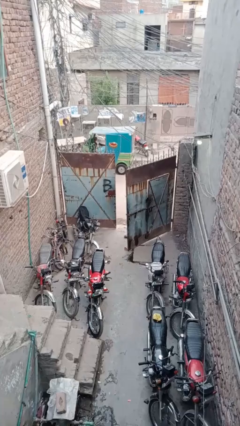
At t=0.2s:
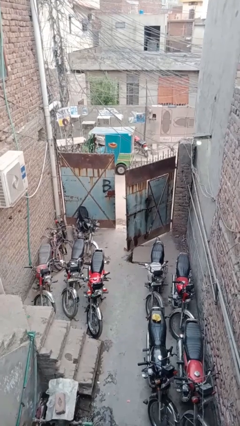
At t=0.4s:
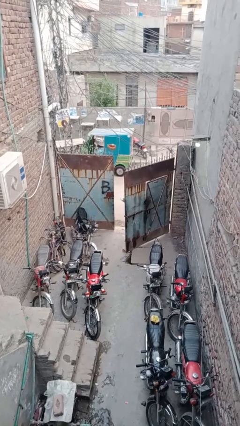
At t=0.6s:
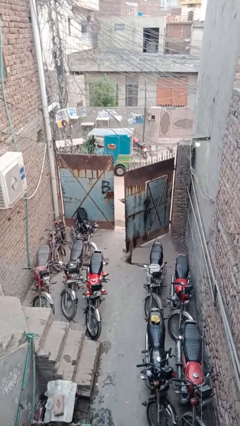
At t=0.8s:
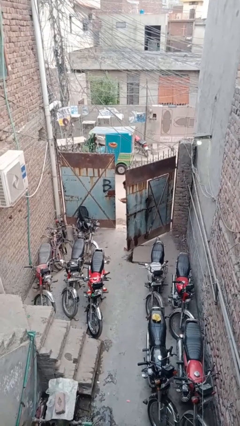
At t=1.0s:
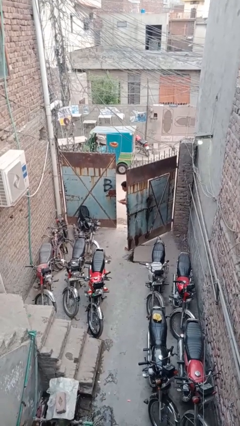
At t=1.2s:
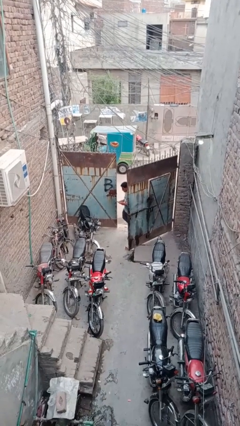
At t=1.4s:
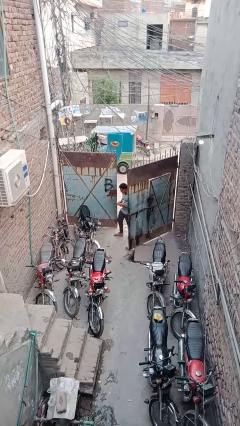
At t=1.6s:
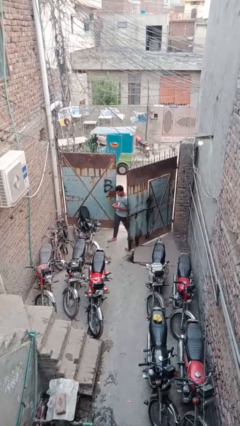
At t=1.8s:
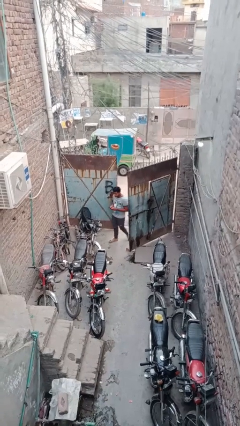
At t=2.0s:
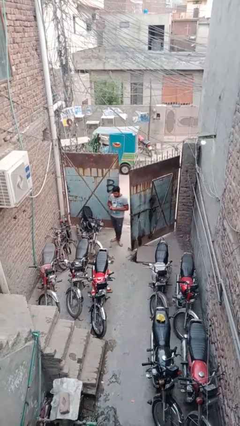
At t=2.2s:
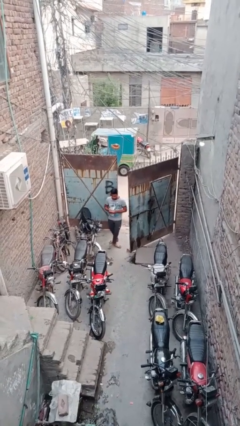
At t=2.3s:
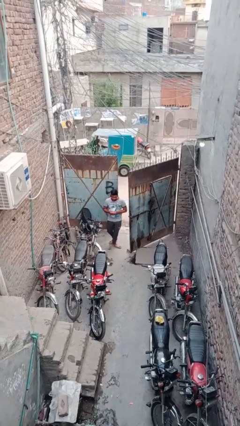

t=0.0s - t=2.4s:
person enters scene through structure

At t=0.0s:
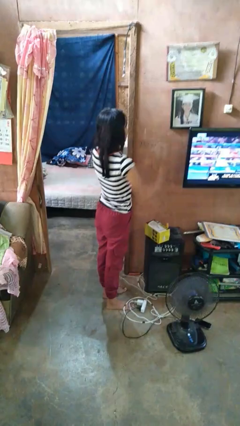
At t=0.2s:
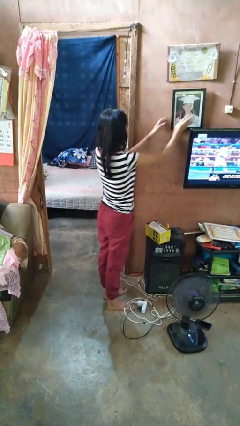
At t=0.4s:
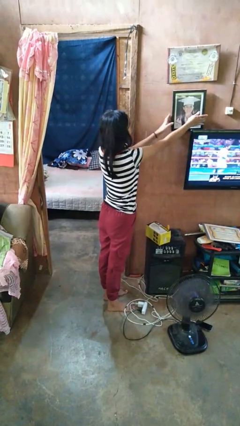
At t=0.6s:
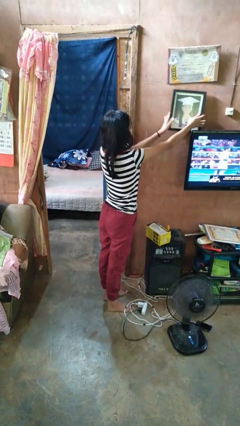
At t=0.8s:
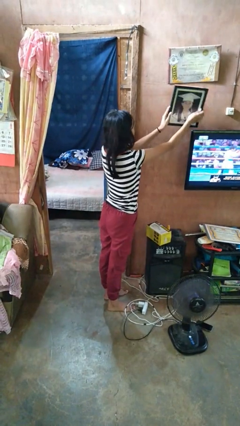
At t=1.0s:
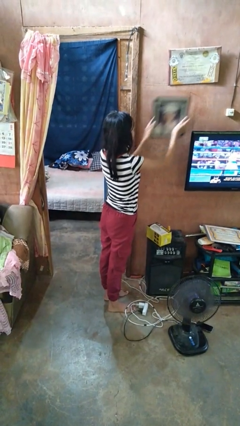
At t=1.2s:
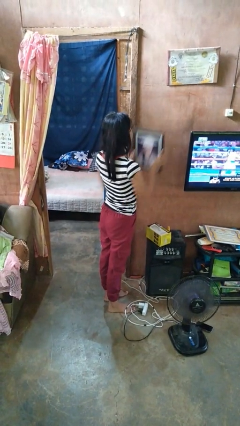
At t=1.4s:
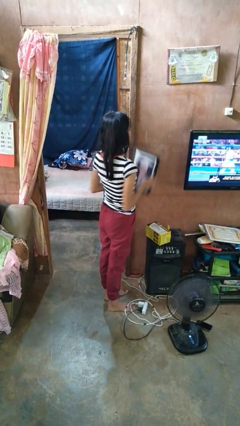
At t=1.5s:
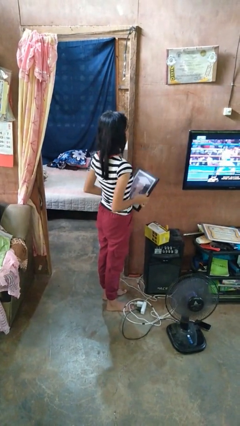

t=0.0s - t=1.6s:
person takes down picture frame

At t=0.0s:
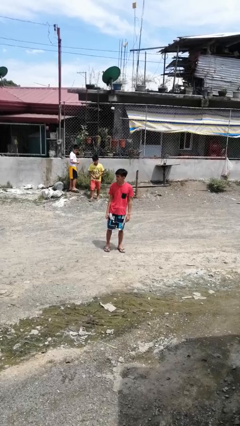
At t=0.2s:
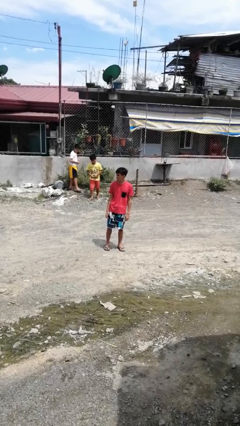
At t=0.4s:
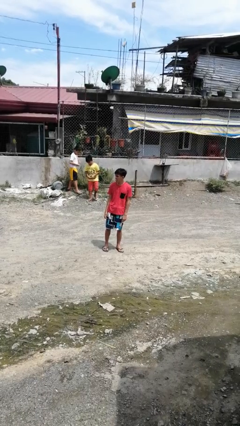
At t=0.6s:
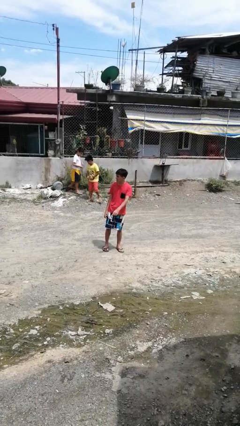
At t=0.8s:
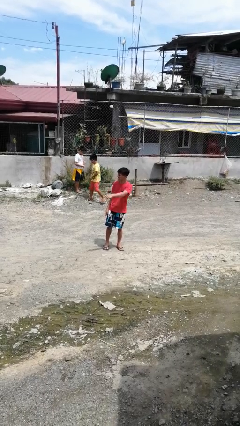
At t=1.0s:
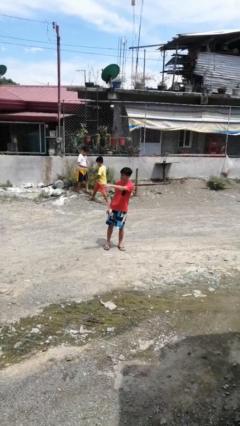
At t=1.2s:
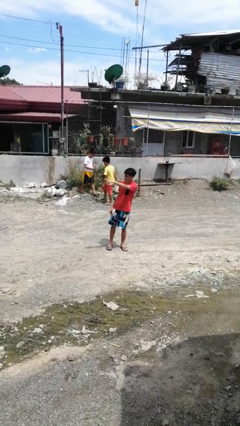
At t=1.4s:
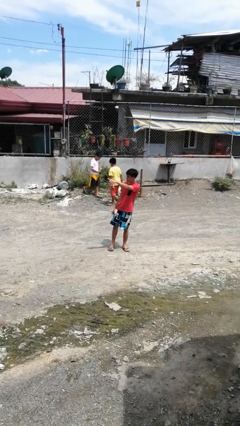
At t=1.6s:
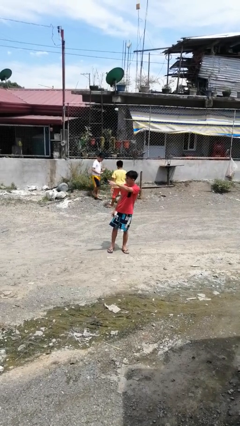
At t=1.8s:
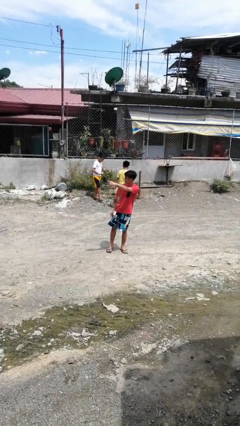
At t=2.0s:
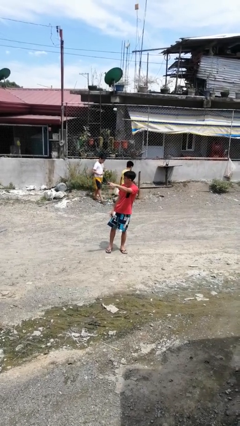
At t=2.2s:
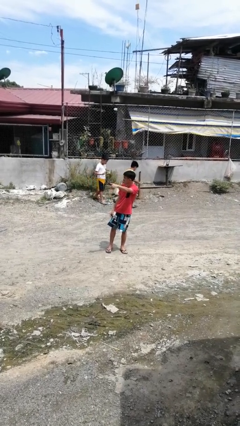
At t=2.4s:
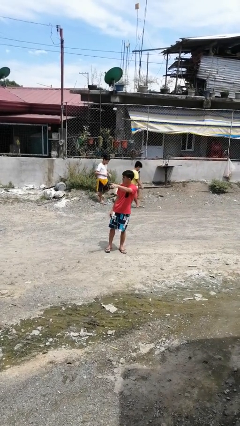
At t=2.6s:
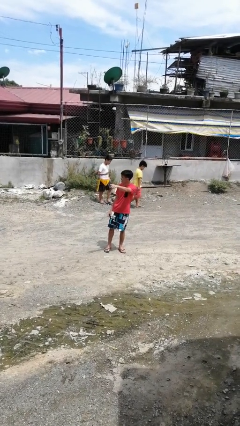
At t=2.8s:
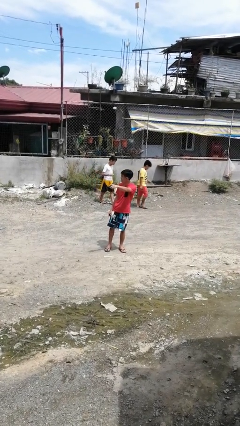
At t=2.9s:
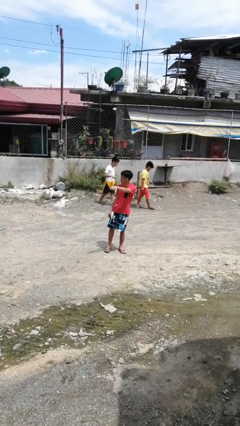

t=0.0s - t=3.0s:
person points at person

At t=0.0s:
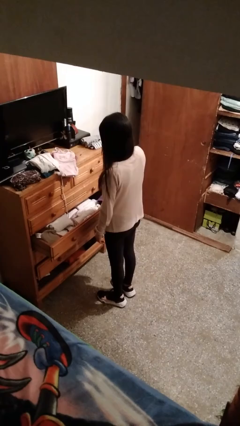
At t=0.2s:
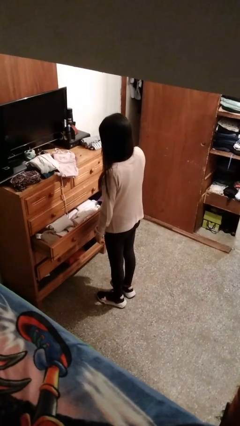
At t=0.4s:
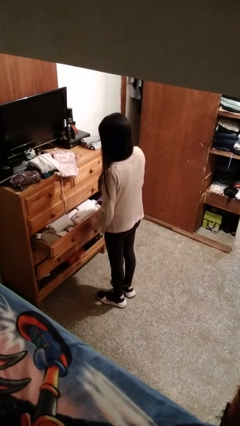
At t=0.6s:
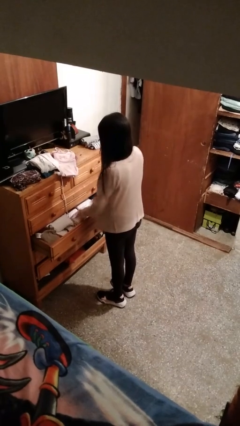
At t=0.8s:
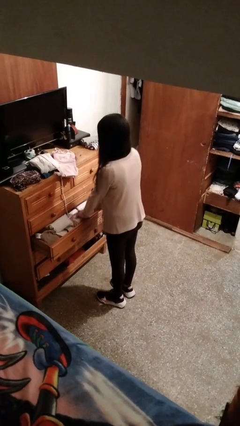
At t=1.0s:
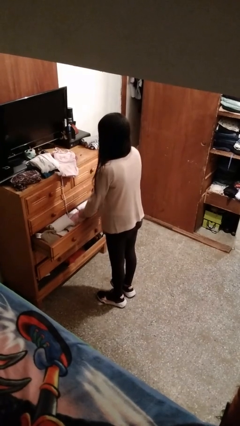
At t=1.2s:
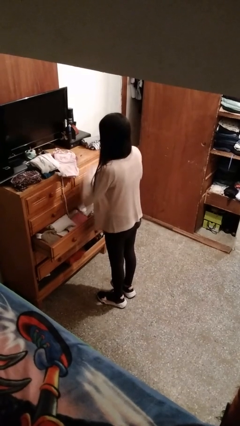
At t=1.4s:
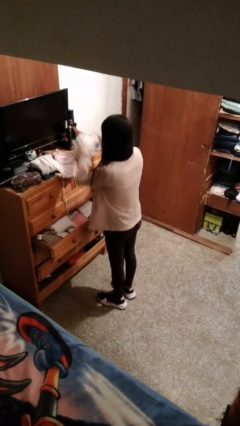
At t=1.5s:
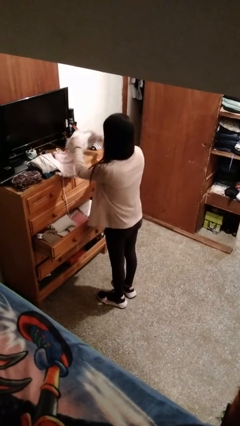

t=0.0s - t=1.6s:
person takes clothes from dresser

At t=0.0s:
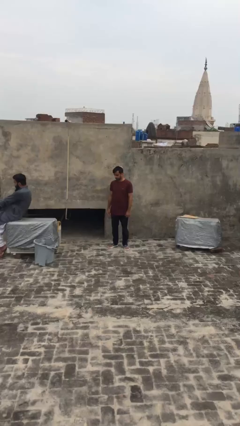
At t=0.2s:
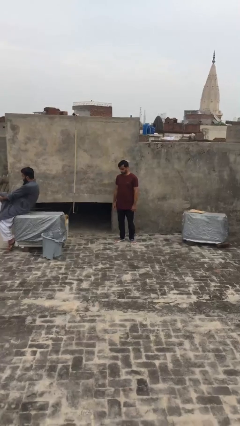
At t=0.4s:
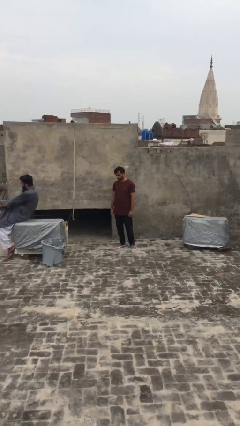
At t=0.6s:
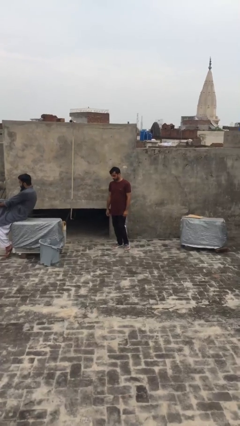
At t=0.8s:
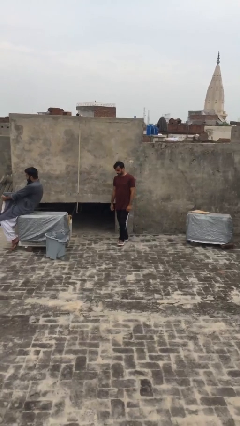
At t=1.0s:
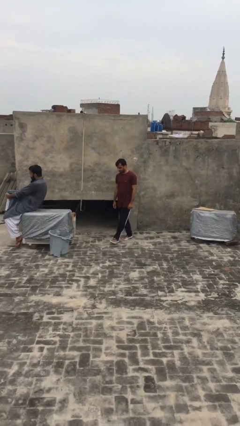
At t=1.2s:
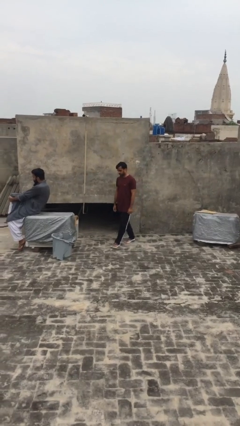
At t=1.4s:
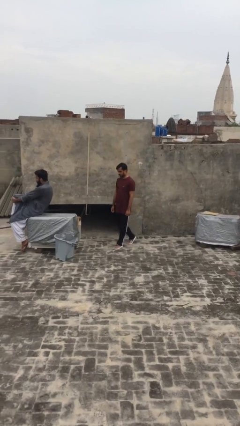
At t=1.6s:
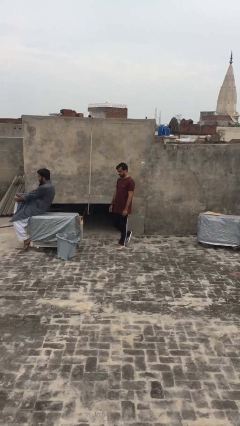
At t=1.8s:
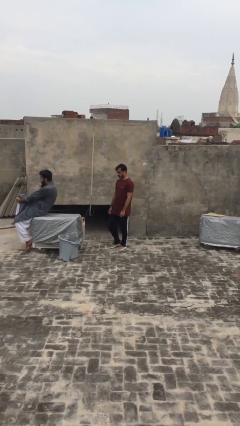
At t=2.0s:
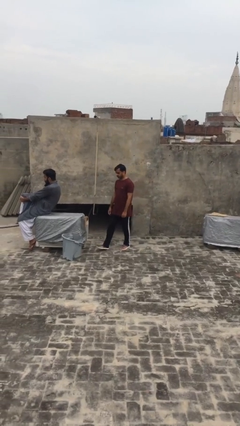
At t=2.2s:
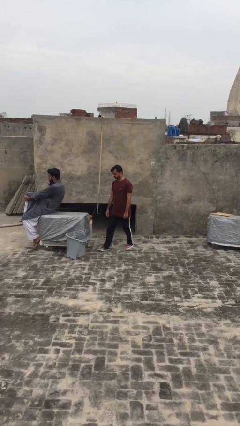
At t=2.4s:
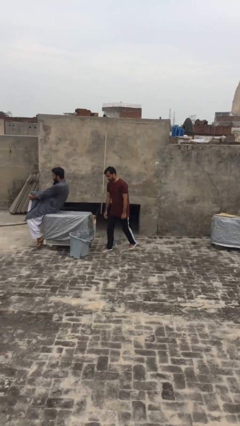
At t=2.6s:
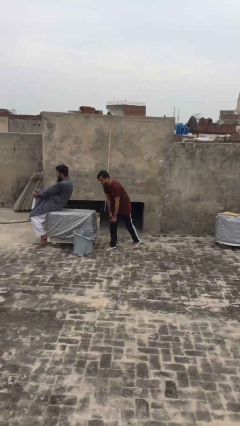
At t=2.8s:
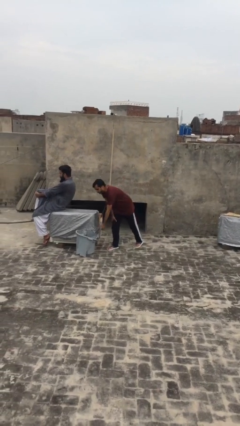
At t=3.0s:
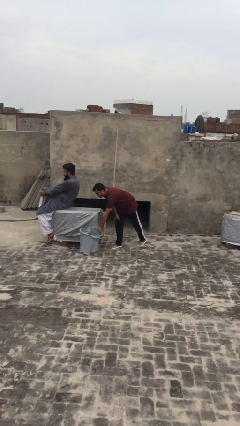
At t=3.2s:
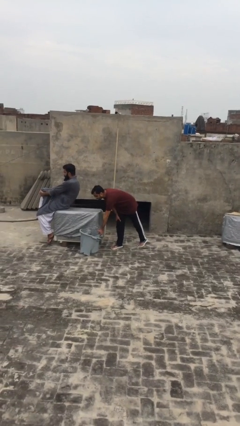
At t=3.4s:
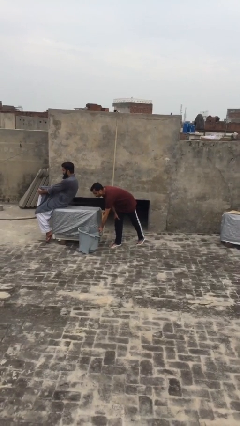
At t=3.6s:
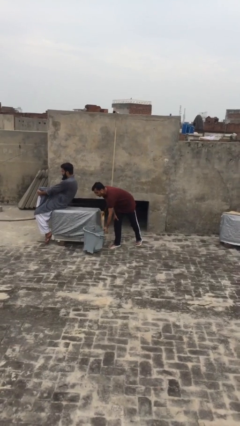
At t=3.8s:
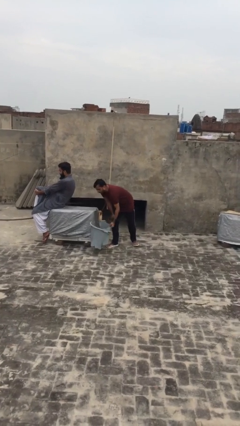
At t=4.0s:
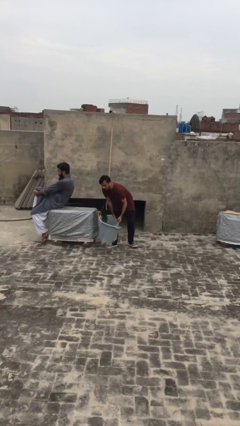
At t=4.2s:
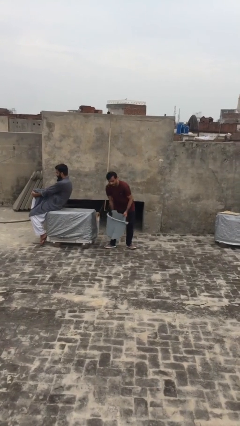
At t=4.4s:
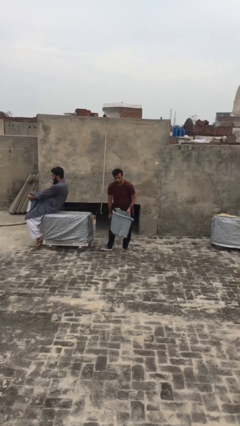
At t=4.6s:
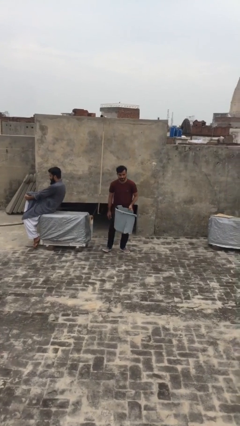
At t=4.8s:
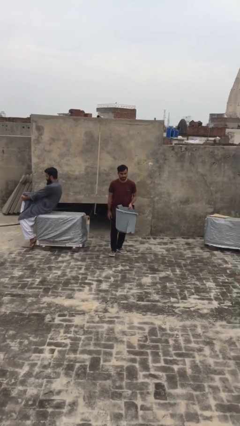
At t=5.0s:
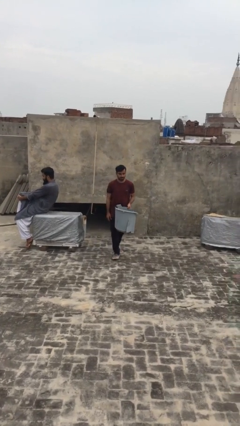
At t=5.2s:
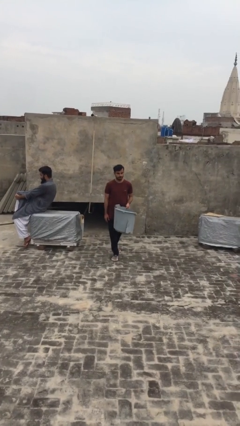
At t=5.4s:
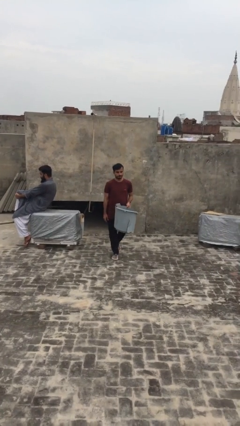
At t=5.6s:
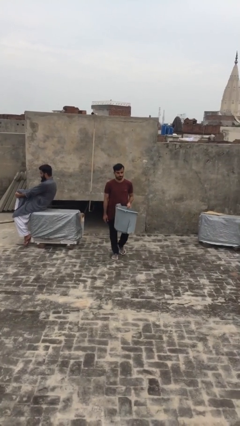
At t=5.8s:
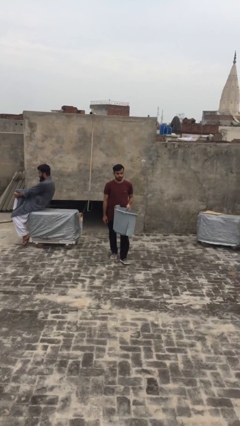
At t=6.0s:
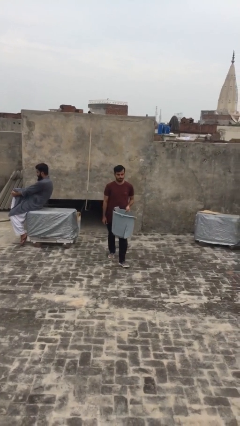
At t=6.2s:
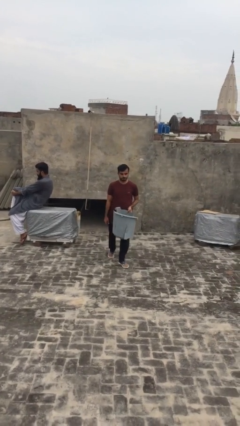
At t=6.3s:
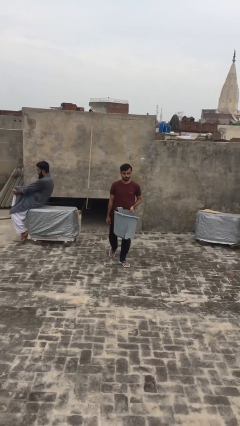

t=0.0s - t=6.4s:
person steals object from person

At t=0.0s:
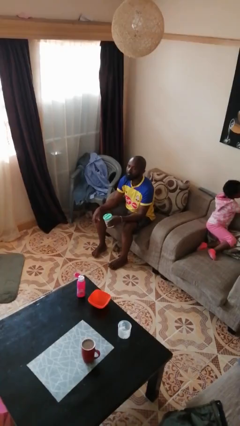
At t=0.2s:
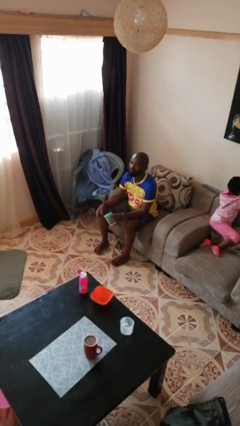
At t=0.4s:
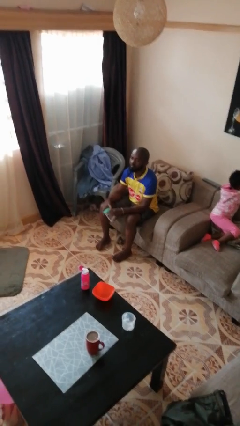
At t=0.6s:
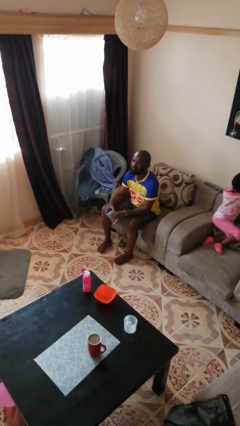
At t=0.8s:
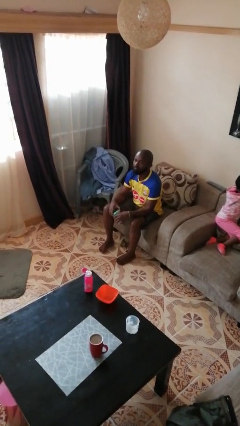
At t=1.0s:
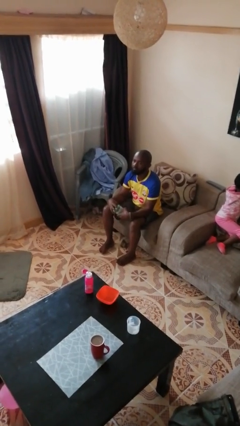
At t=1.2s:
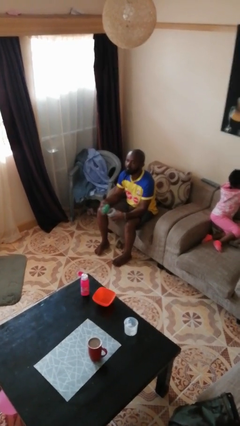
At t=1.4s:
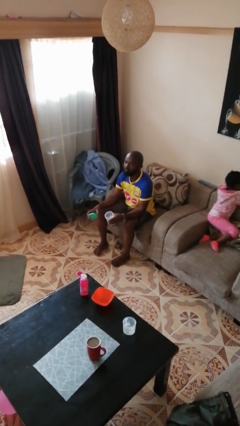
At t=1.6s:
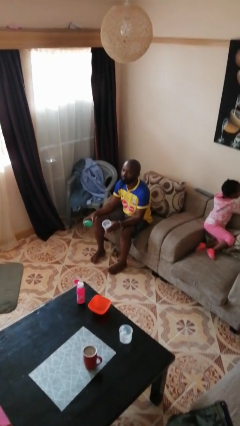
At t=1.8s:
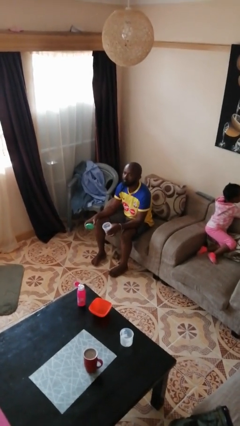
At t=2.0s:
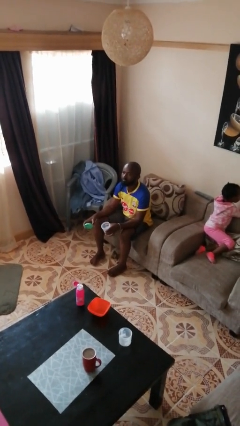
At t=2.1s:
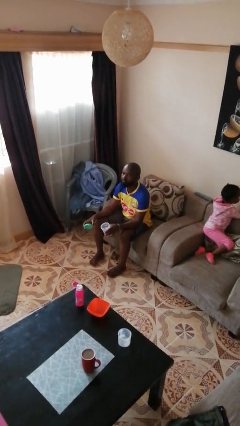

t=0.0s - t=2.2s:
person opens jar

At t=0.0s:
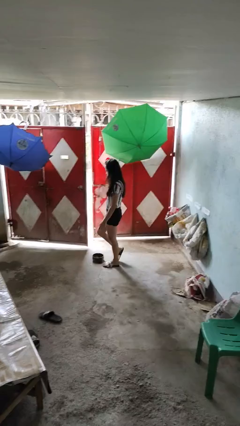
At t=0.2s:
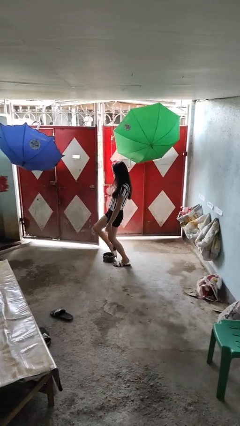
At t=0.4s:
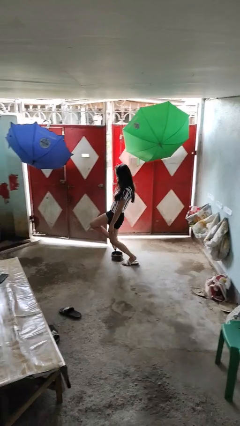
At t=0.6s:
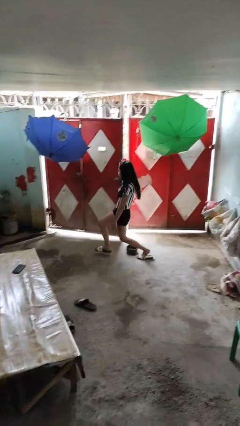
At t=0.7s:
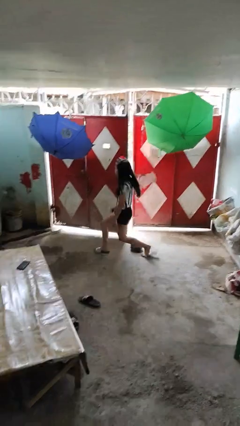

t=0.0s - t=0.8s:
person trips on object on floor
